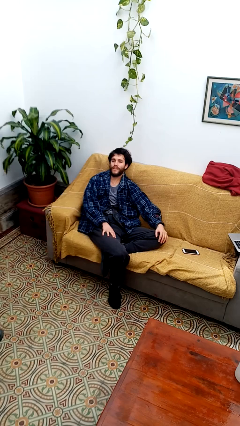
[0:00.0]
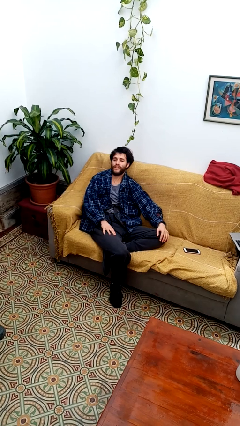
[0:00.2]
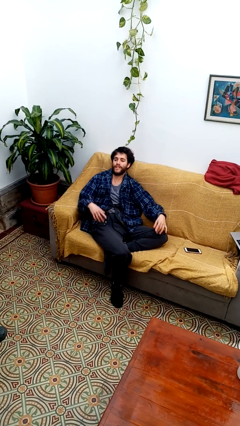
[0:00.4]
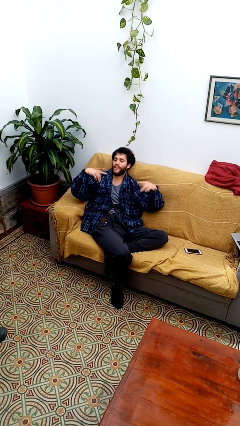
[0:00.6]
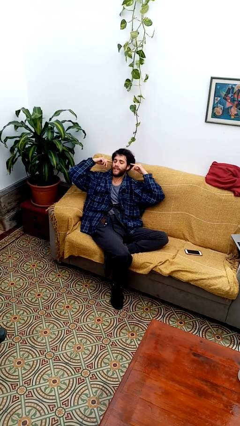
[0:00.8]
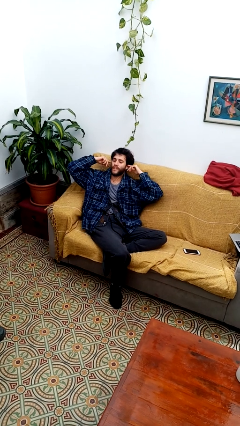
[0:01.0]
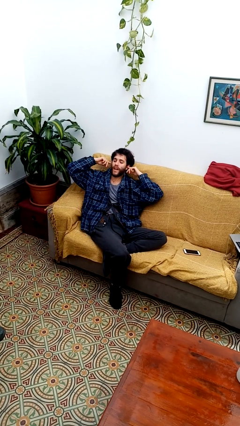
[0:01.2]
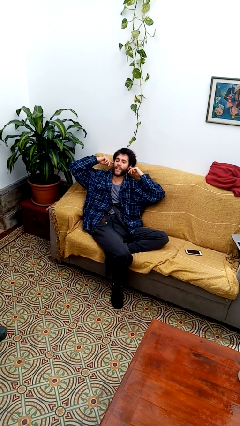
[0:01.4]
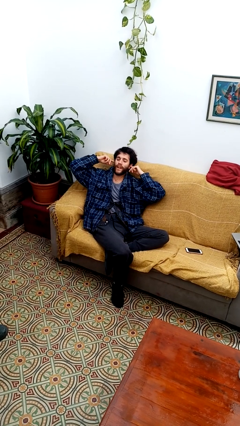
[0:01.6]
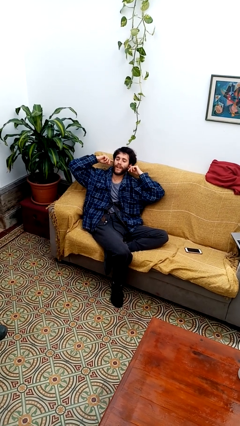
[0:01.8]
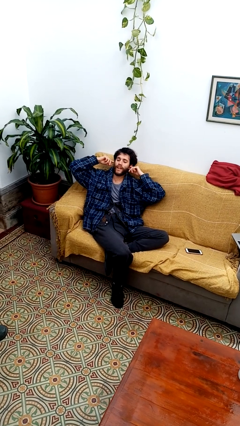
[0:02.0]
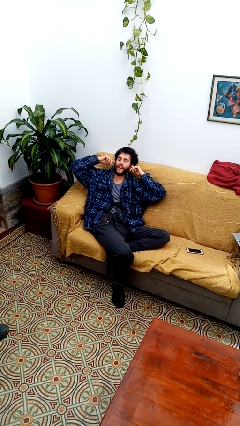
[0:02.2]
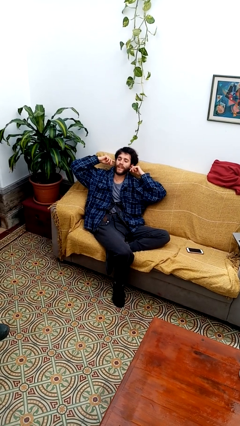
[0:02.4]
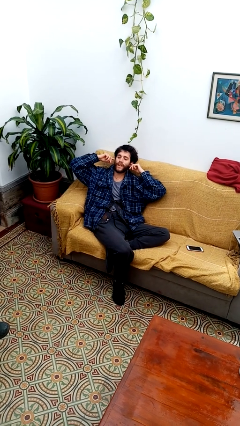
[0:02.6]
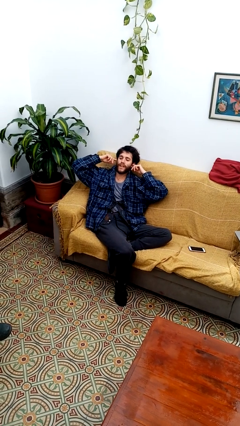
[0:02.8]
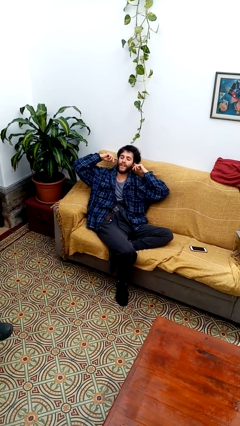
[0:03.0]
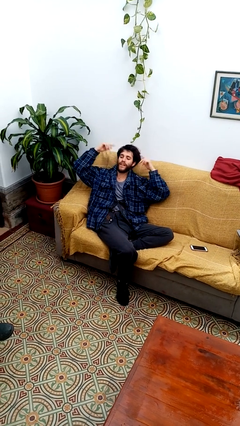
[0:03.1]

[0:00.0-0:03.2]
person puts fingers in ear

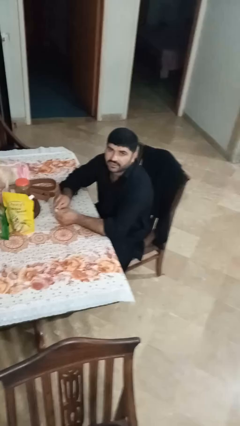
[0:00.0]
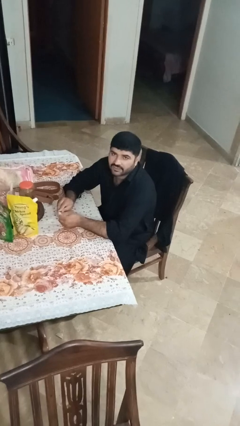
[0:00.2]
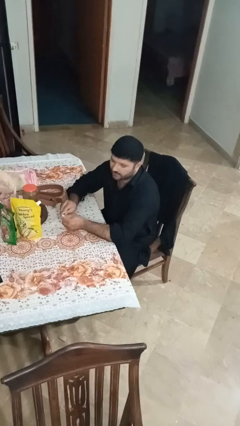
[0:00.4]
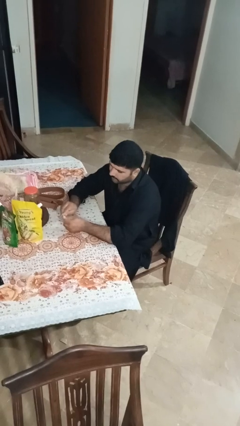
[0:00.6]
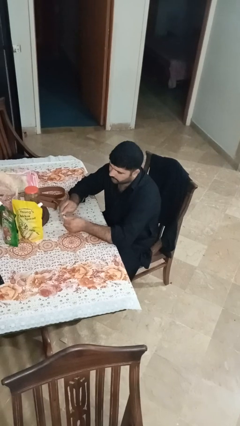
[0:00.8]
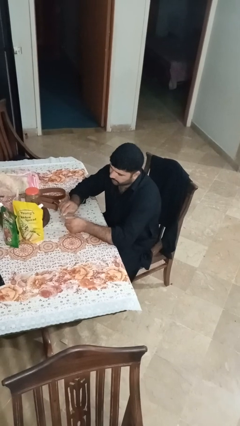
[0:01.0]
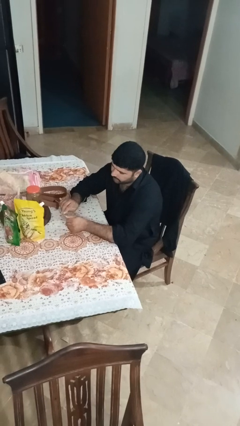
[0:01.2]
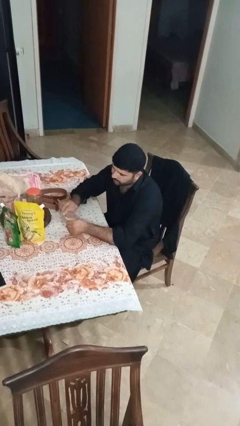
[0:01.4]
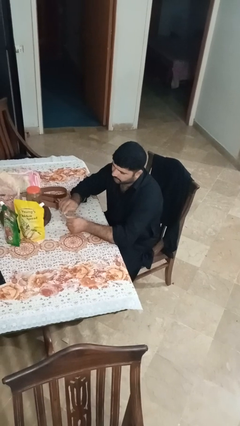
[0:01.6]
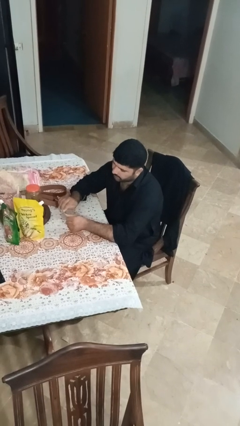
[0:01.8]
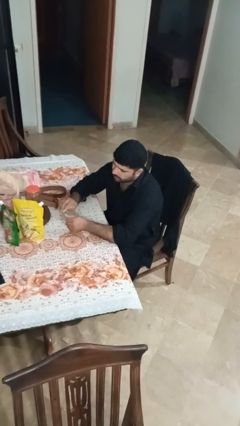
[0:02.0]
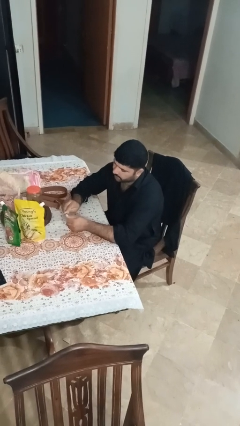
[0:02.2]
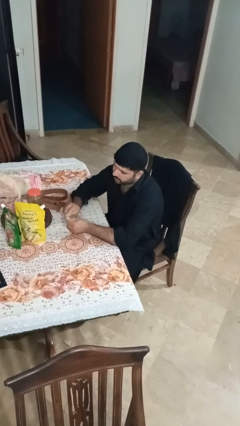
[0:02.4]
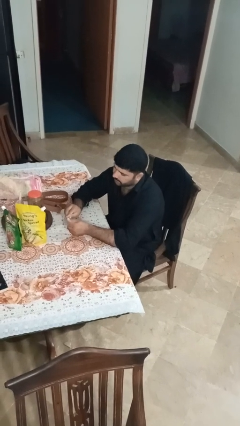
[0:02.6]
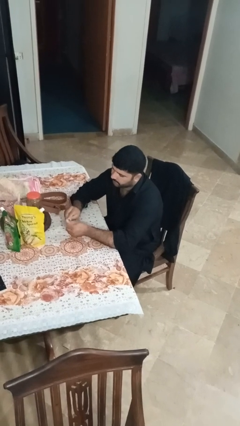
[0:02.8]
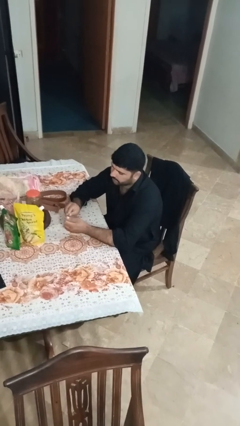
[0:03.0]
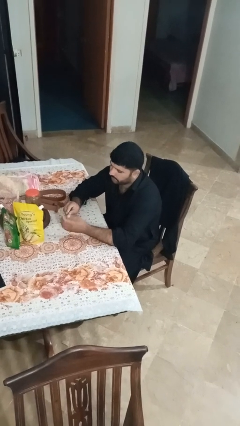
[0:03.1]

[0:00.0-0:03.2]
person files fingernails

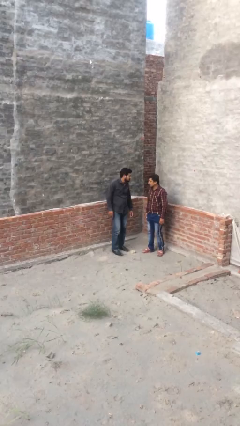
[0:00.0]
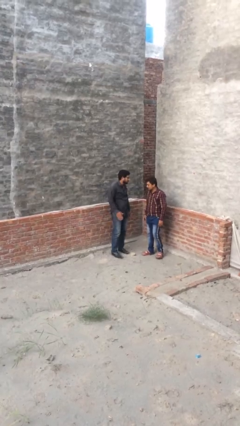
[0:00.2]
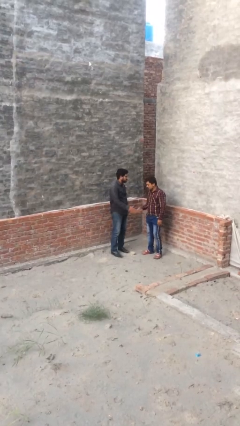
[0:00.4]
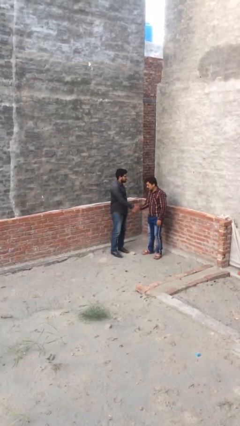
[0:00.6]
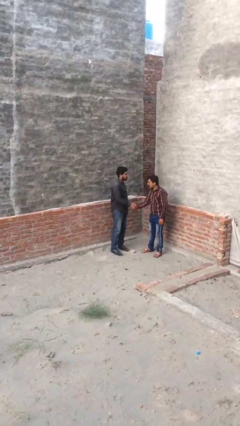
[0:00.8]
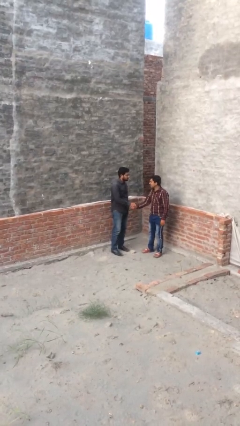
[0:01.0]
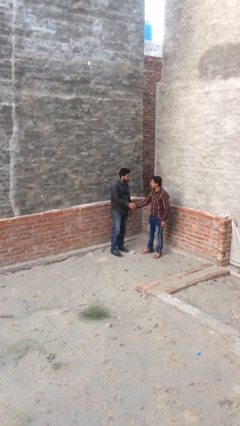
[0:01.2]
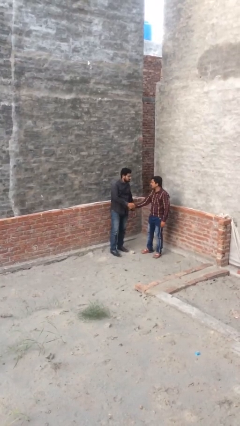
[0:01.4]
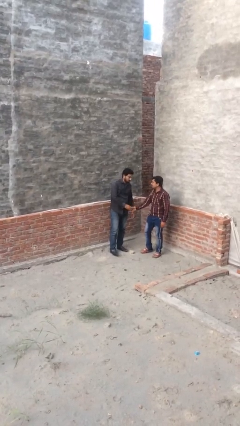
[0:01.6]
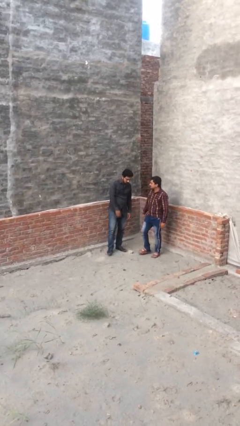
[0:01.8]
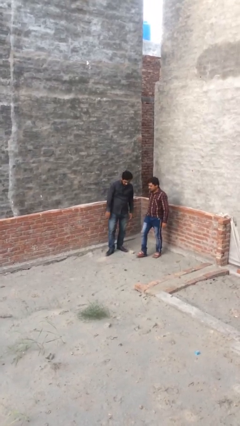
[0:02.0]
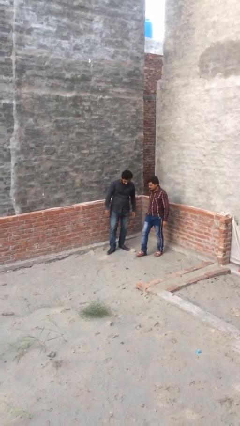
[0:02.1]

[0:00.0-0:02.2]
person shakes hand

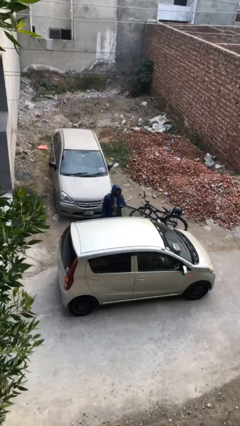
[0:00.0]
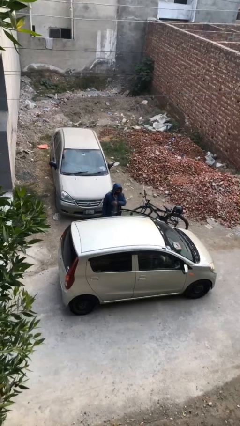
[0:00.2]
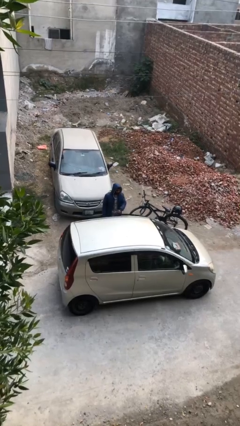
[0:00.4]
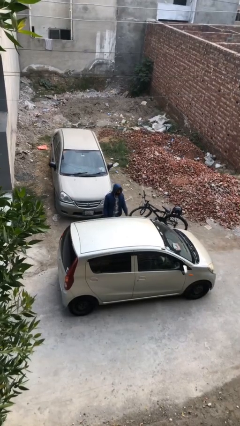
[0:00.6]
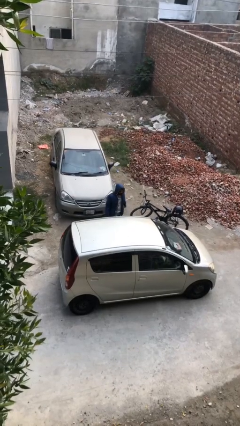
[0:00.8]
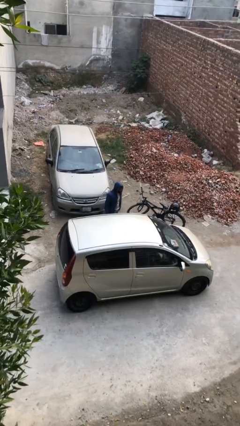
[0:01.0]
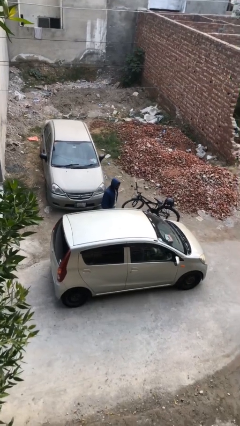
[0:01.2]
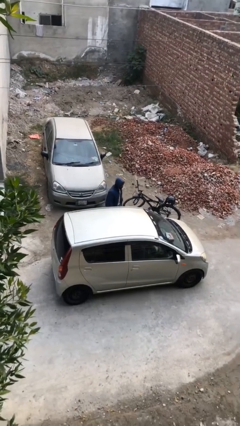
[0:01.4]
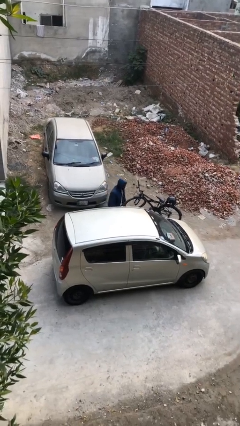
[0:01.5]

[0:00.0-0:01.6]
person enters car

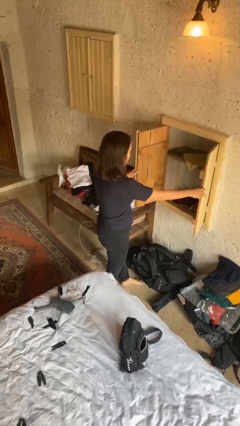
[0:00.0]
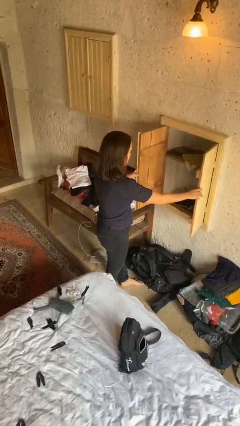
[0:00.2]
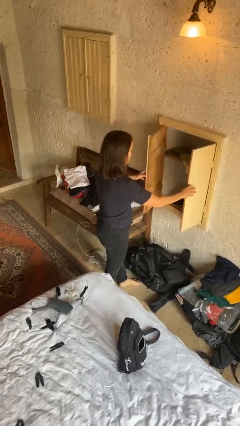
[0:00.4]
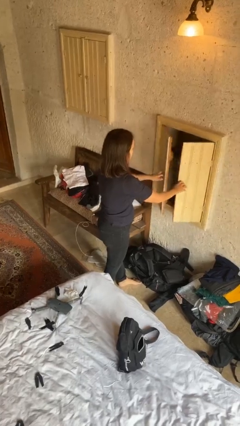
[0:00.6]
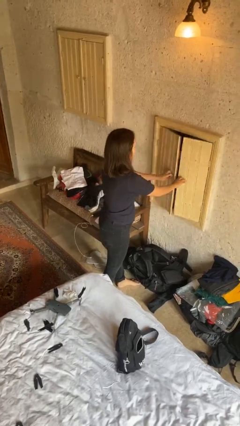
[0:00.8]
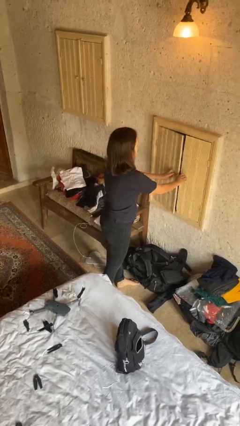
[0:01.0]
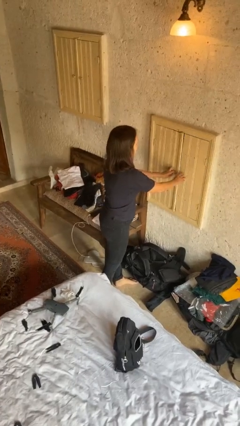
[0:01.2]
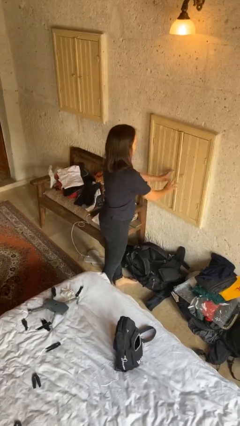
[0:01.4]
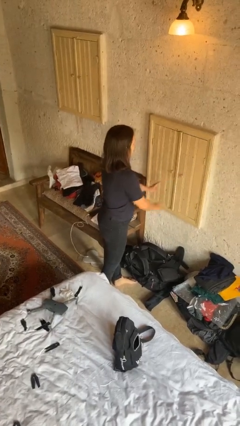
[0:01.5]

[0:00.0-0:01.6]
person closes closet door

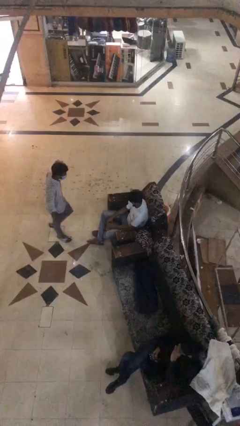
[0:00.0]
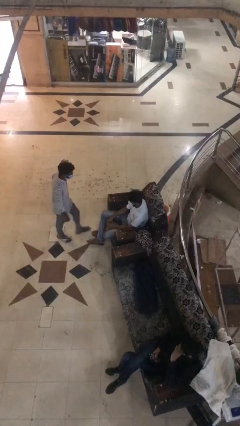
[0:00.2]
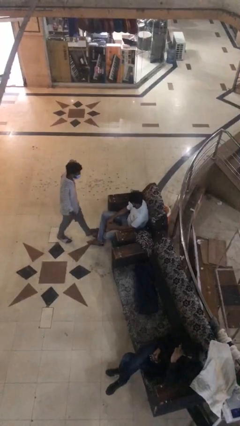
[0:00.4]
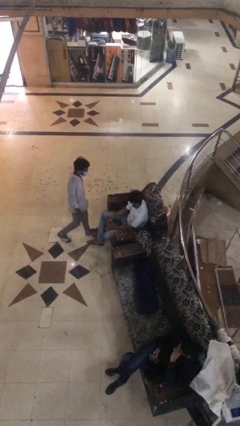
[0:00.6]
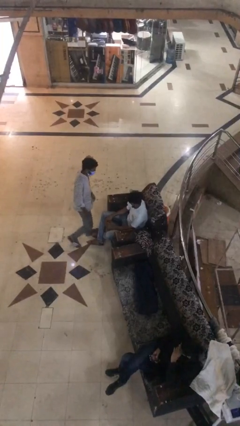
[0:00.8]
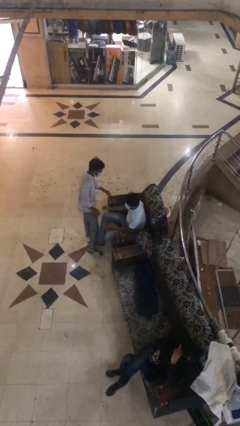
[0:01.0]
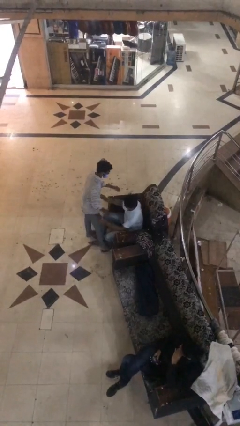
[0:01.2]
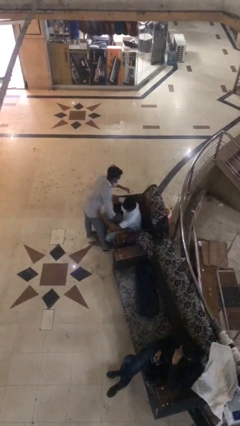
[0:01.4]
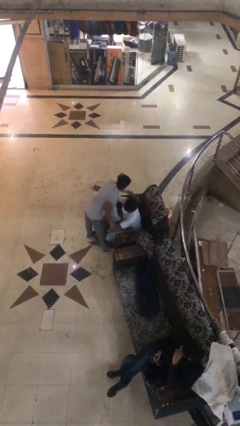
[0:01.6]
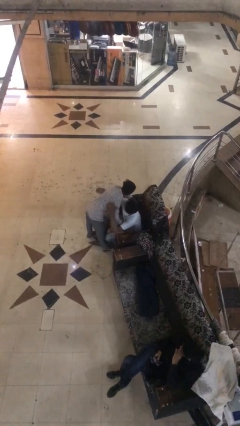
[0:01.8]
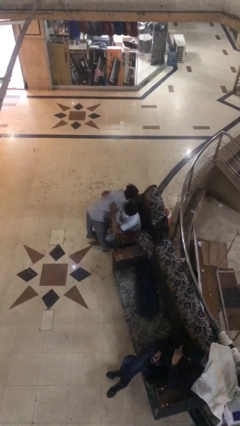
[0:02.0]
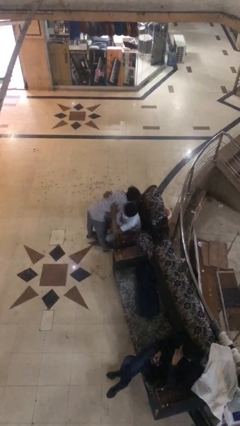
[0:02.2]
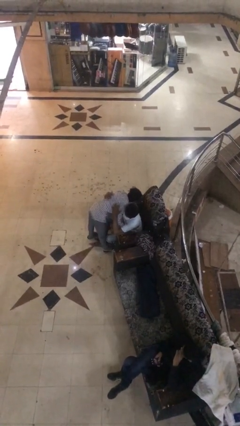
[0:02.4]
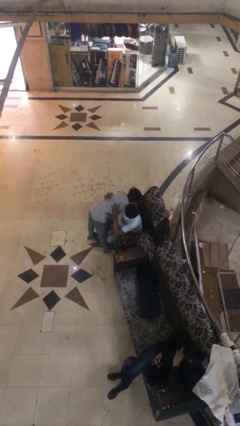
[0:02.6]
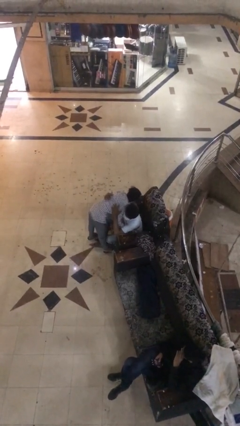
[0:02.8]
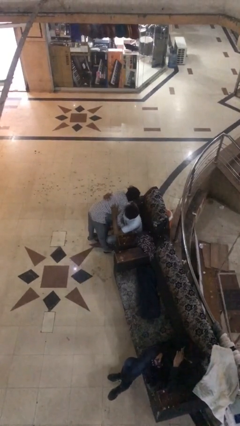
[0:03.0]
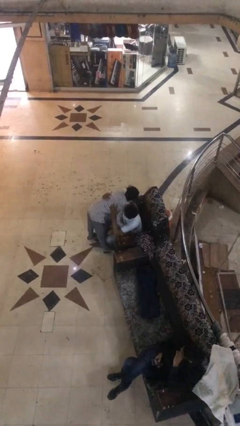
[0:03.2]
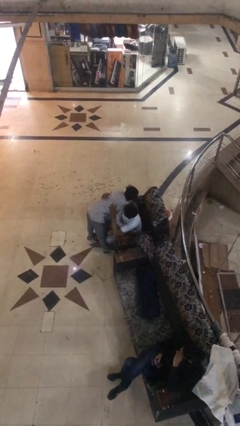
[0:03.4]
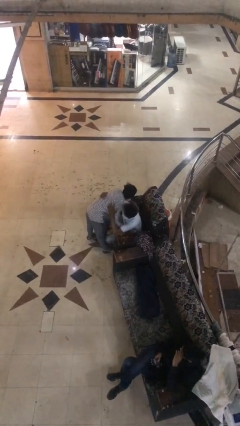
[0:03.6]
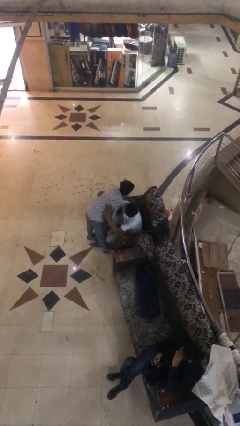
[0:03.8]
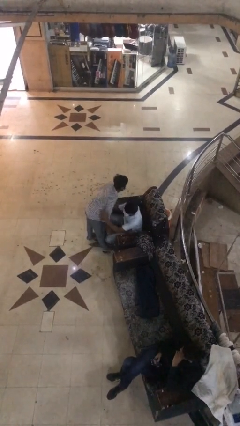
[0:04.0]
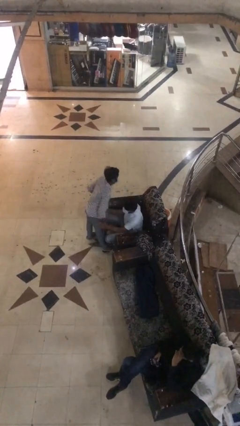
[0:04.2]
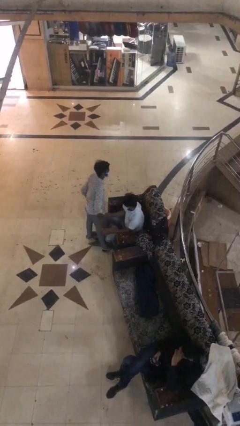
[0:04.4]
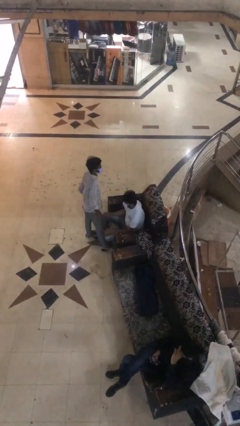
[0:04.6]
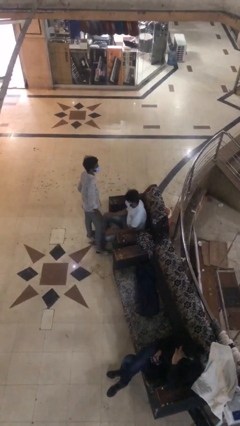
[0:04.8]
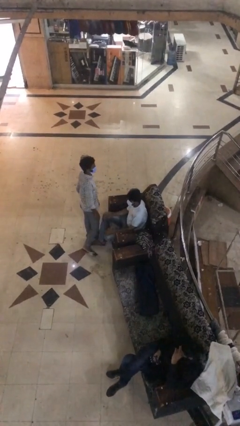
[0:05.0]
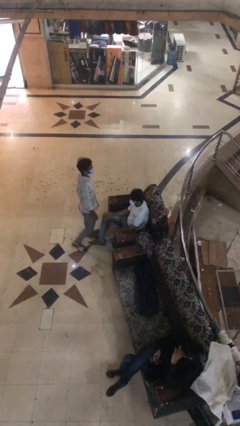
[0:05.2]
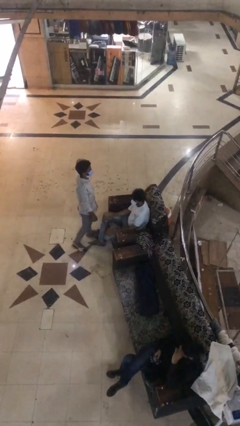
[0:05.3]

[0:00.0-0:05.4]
person embraces person
